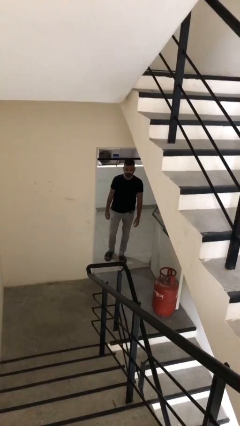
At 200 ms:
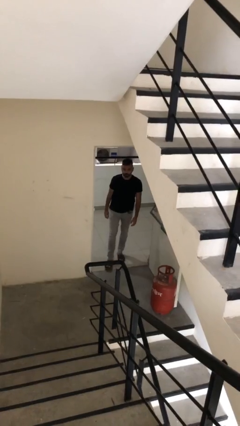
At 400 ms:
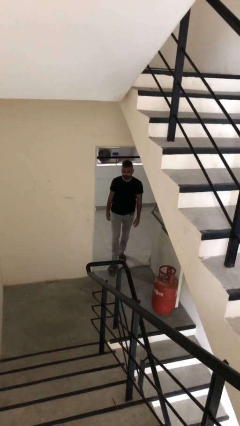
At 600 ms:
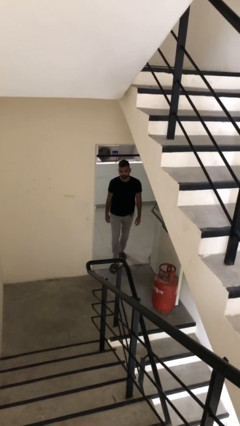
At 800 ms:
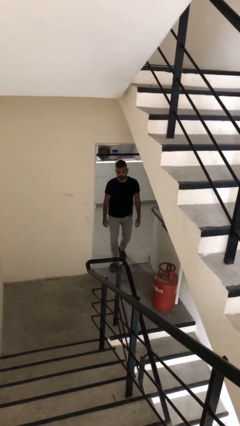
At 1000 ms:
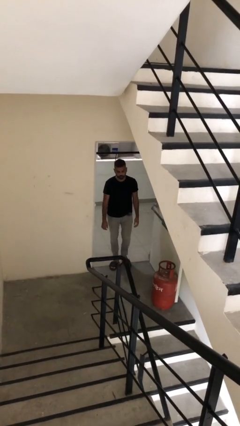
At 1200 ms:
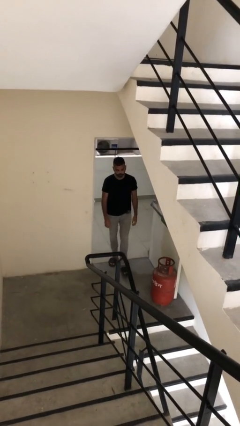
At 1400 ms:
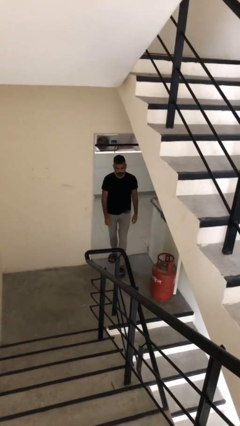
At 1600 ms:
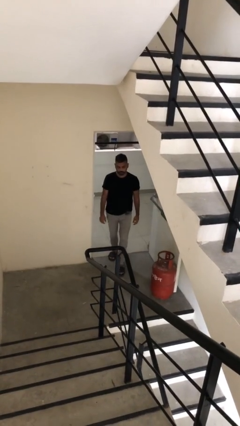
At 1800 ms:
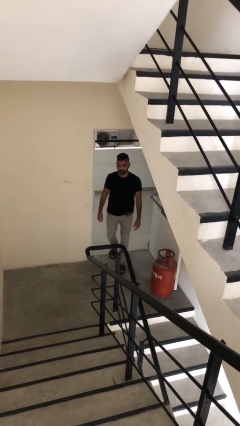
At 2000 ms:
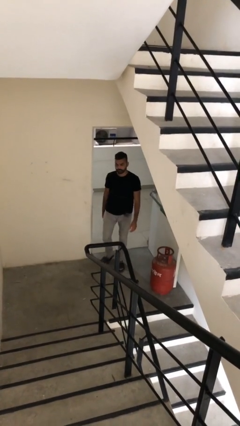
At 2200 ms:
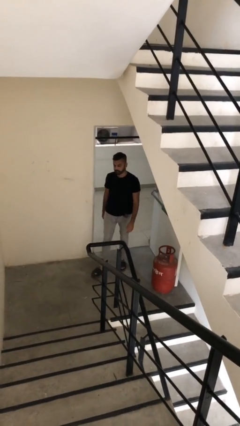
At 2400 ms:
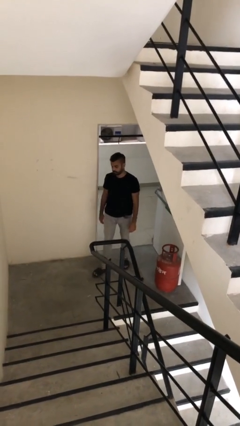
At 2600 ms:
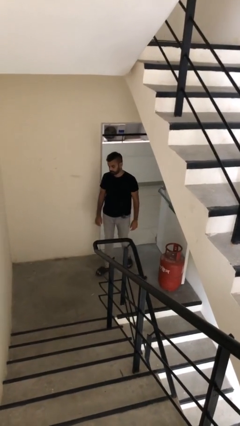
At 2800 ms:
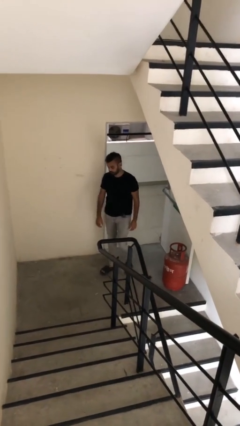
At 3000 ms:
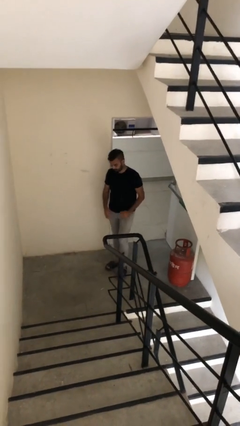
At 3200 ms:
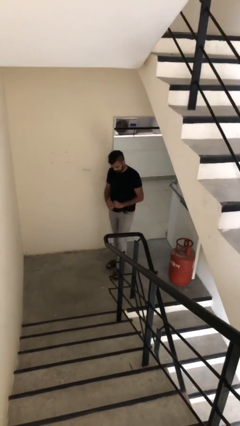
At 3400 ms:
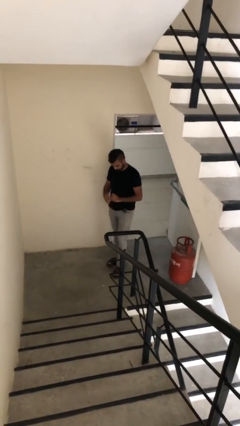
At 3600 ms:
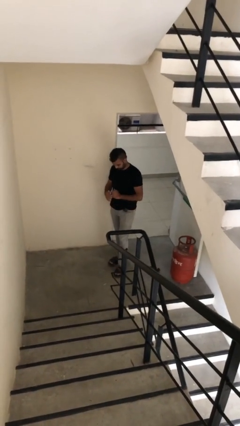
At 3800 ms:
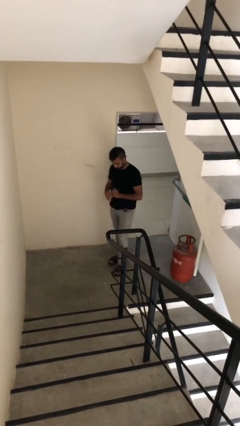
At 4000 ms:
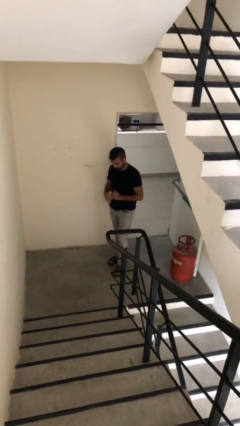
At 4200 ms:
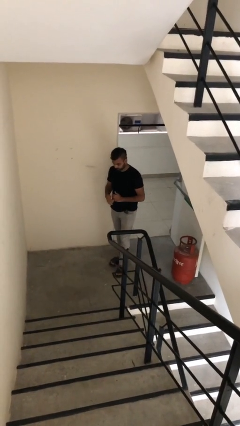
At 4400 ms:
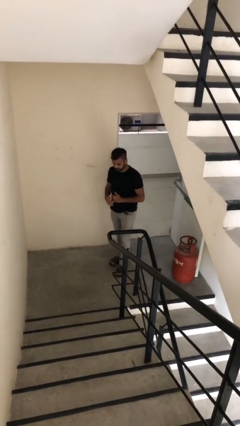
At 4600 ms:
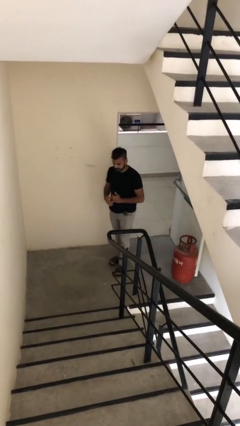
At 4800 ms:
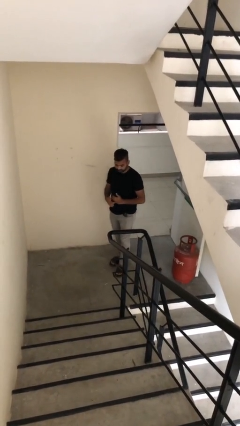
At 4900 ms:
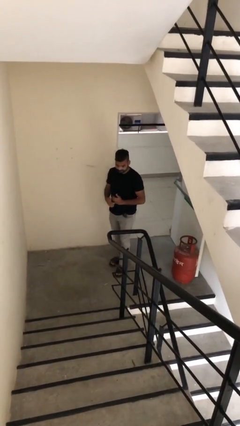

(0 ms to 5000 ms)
person enters scene through structure

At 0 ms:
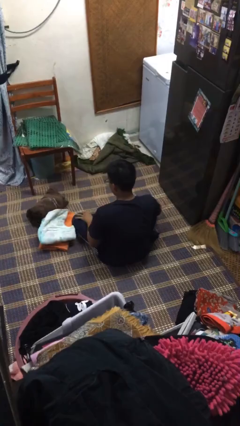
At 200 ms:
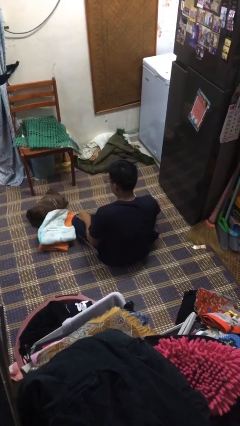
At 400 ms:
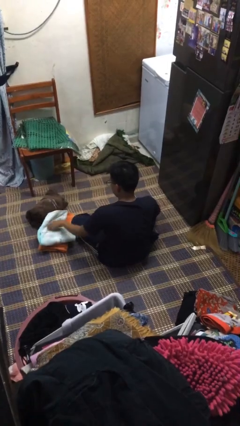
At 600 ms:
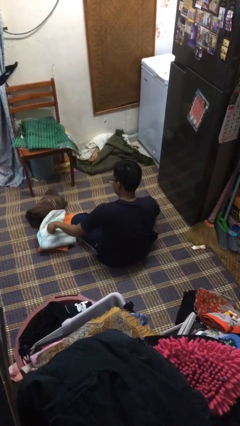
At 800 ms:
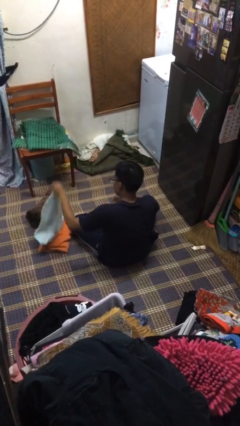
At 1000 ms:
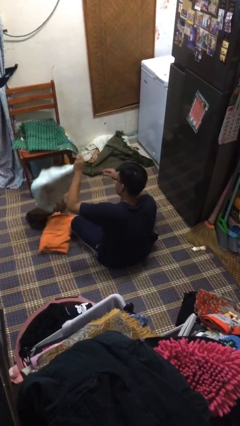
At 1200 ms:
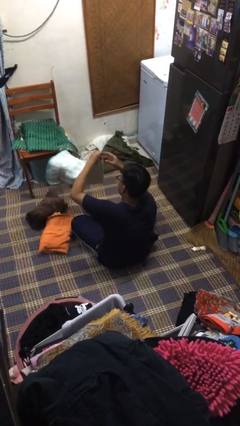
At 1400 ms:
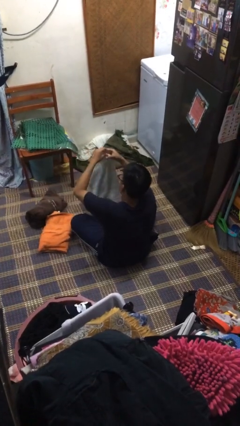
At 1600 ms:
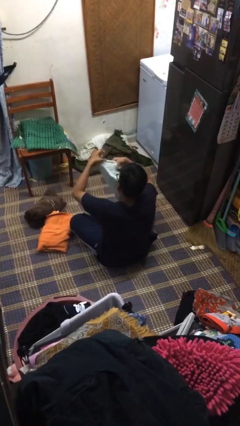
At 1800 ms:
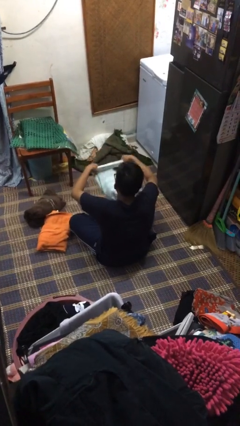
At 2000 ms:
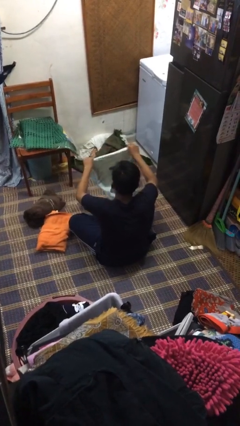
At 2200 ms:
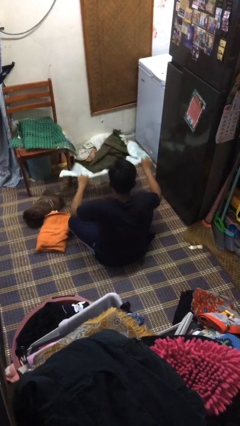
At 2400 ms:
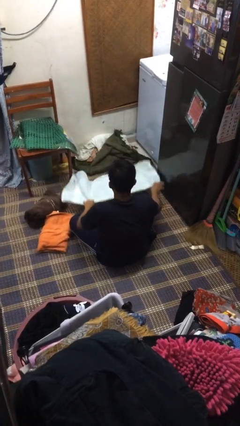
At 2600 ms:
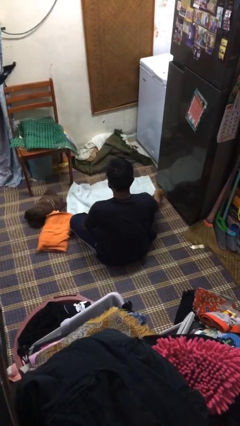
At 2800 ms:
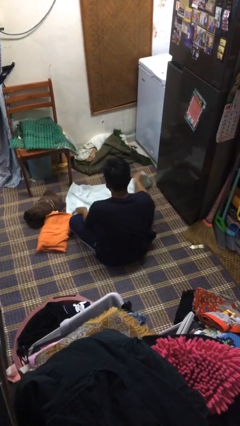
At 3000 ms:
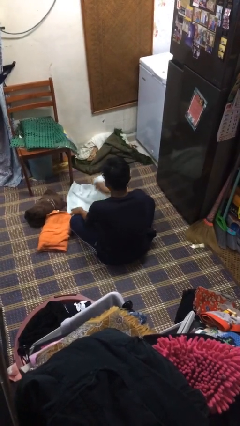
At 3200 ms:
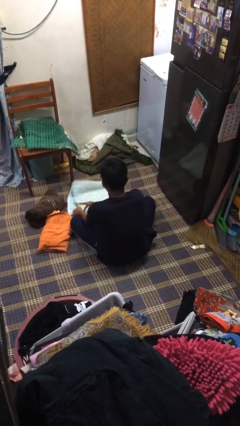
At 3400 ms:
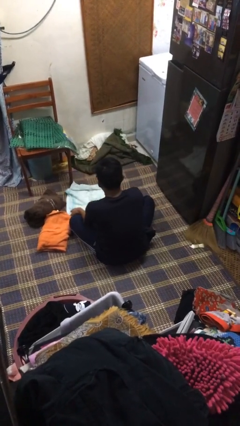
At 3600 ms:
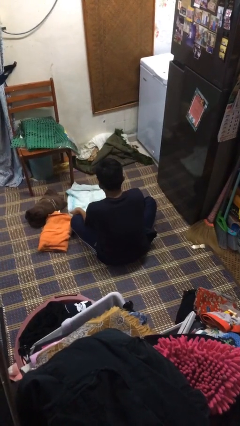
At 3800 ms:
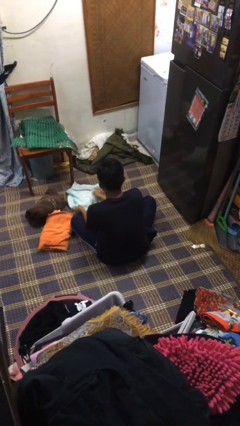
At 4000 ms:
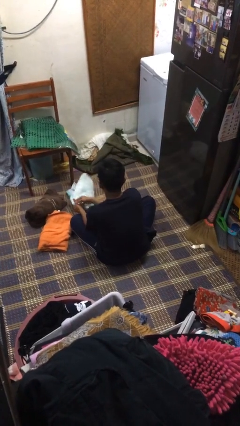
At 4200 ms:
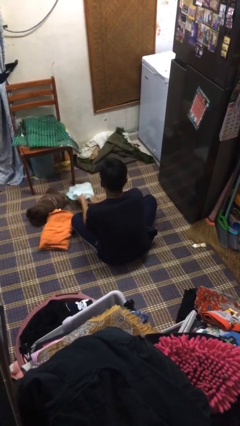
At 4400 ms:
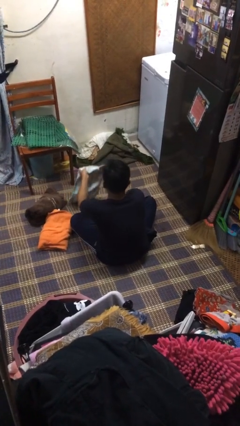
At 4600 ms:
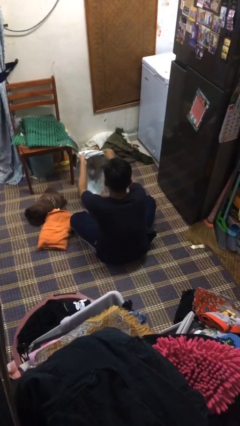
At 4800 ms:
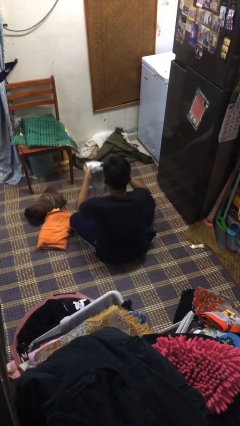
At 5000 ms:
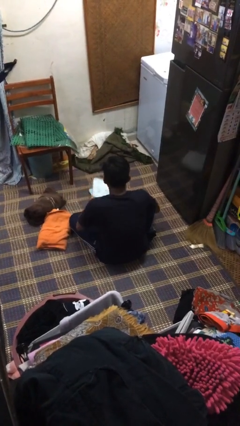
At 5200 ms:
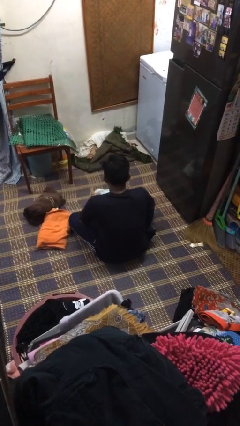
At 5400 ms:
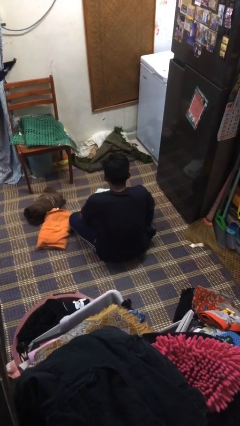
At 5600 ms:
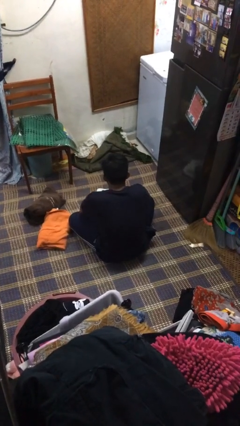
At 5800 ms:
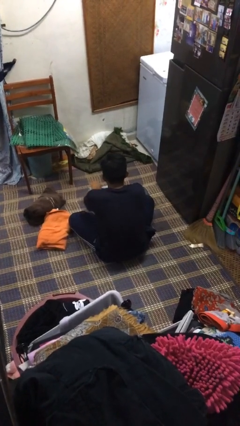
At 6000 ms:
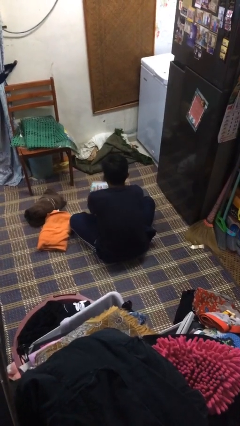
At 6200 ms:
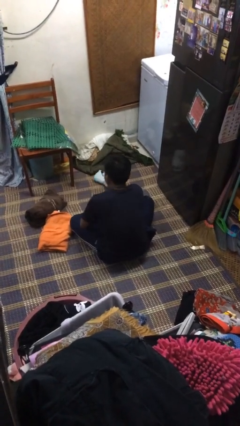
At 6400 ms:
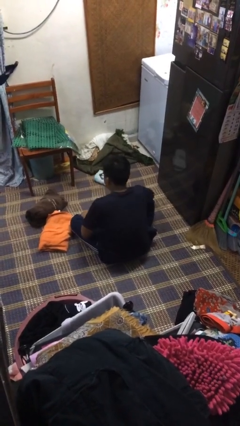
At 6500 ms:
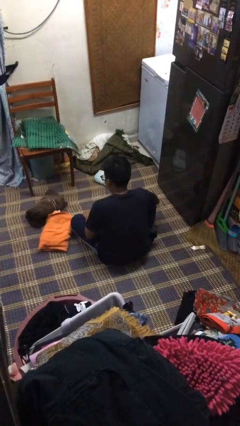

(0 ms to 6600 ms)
person folds towel

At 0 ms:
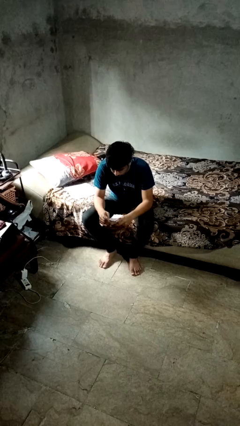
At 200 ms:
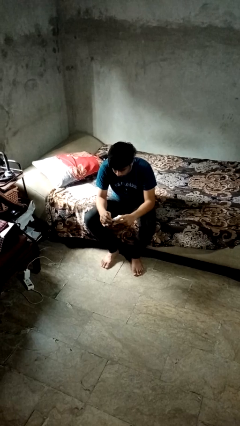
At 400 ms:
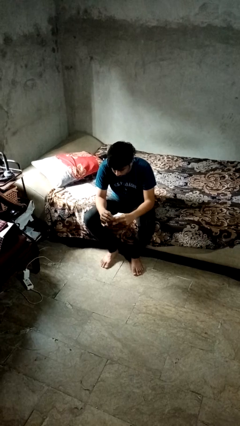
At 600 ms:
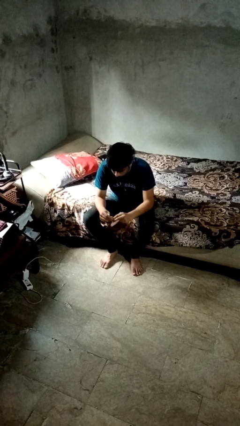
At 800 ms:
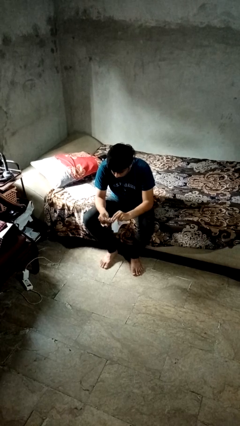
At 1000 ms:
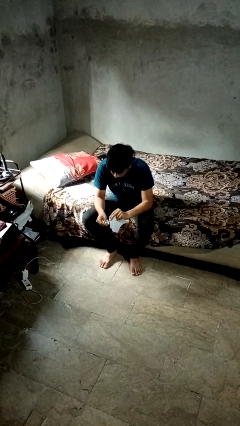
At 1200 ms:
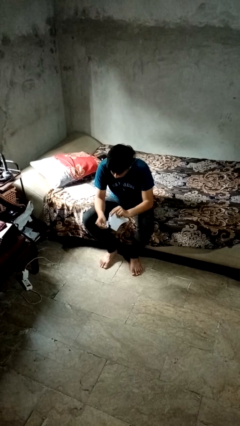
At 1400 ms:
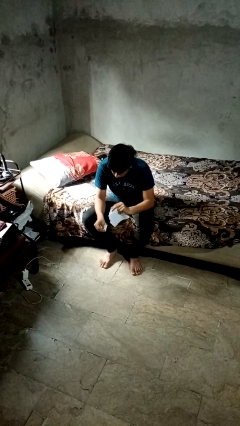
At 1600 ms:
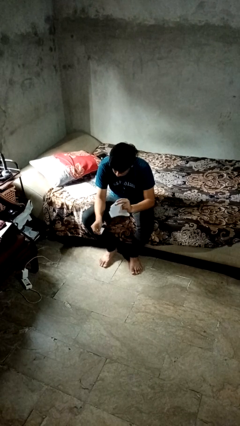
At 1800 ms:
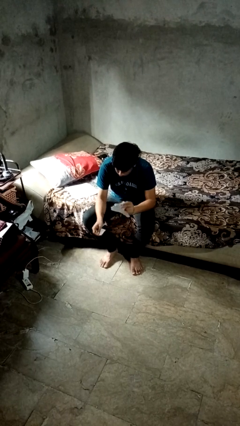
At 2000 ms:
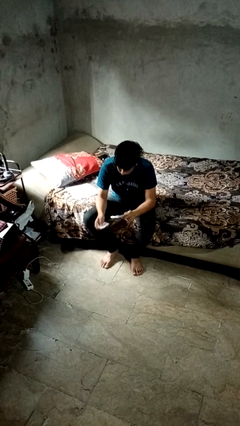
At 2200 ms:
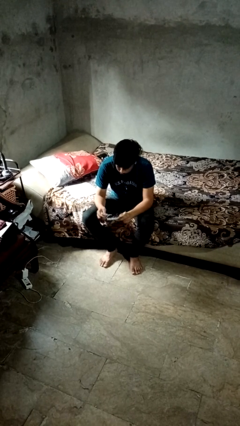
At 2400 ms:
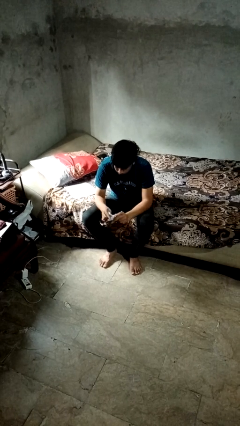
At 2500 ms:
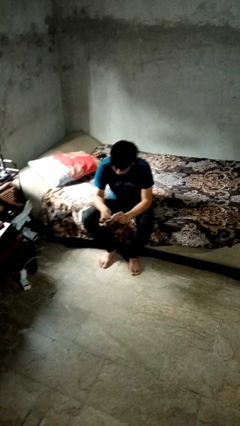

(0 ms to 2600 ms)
person tears paper

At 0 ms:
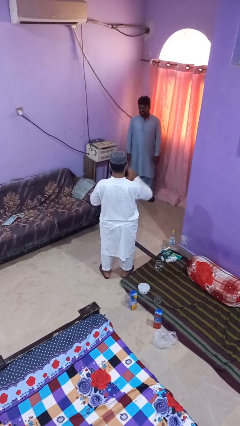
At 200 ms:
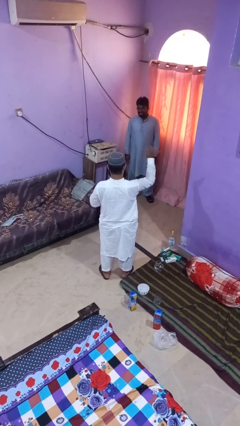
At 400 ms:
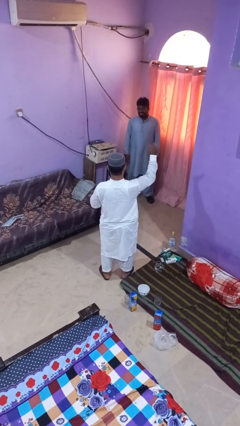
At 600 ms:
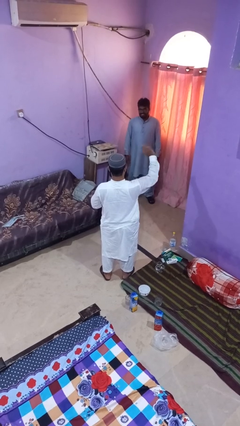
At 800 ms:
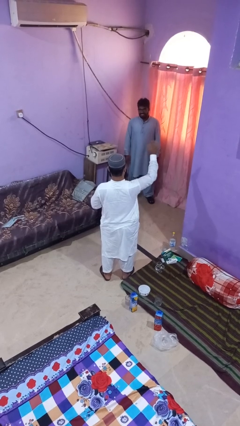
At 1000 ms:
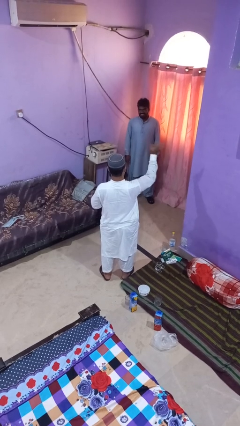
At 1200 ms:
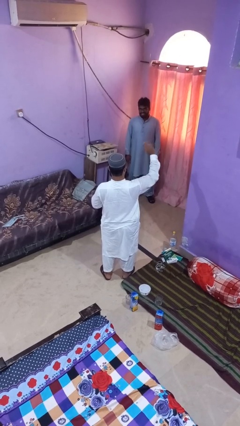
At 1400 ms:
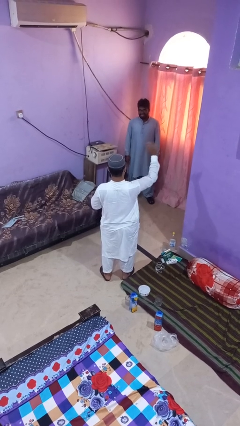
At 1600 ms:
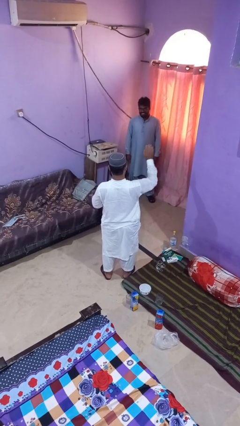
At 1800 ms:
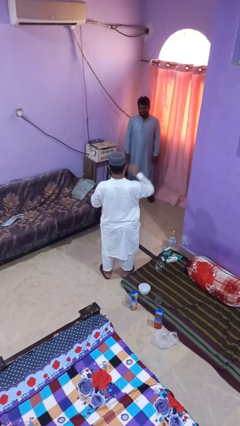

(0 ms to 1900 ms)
person waves at person

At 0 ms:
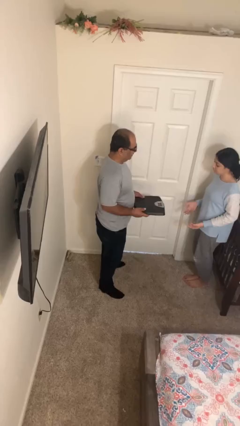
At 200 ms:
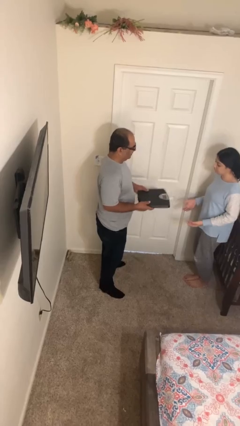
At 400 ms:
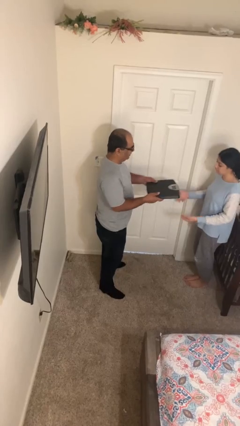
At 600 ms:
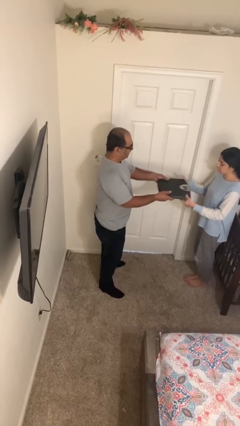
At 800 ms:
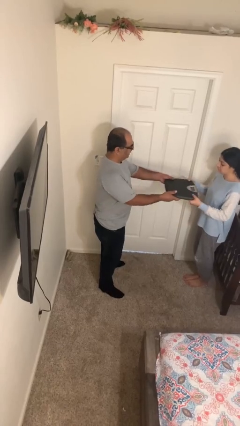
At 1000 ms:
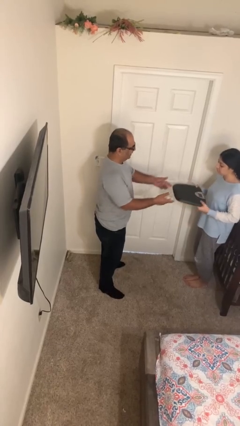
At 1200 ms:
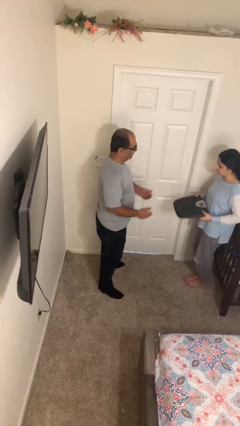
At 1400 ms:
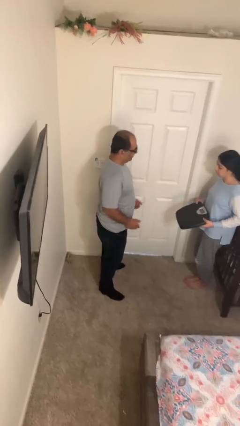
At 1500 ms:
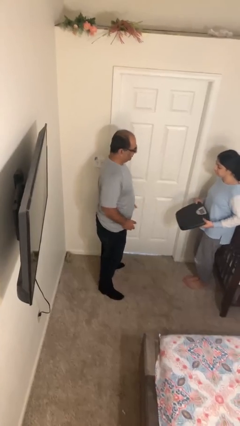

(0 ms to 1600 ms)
person transfers object to person
